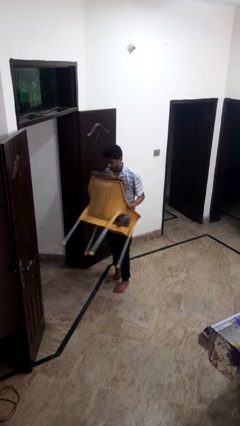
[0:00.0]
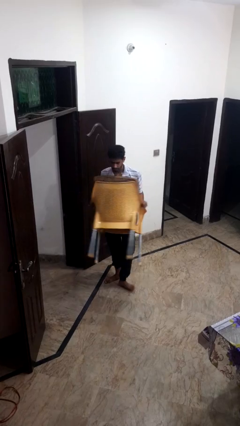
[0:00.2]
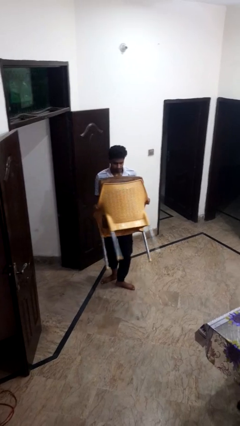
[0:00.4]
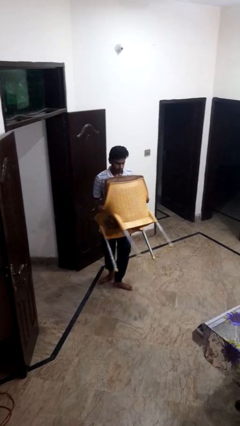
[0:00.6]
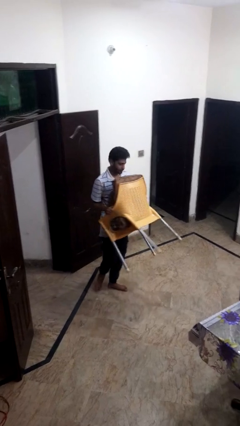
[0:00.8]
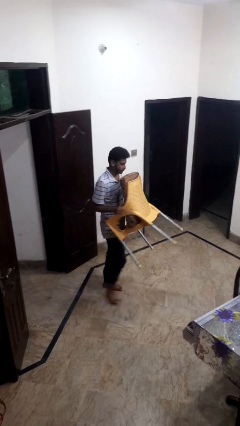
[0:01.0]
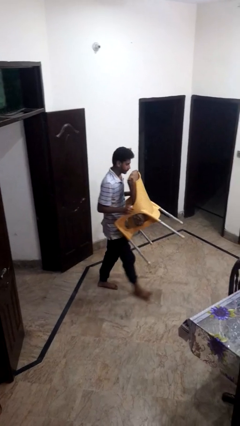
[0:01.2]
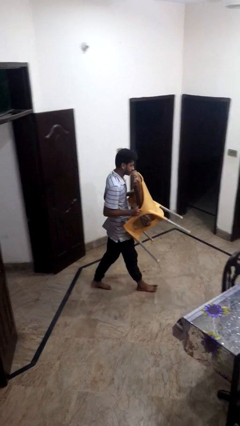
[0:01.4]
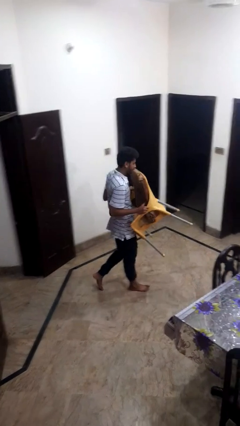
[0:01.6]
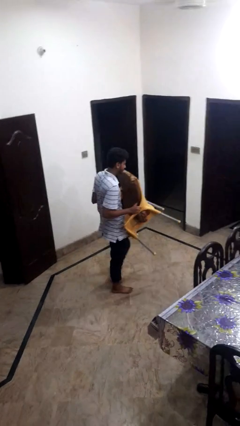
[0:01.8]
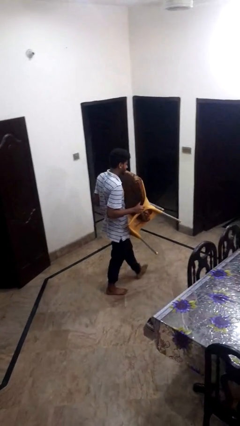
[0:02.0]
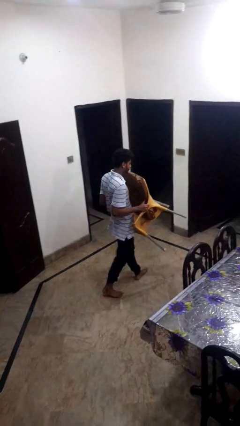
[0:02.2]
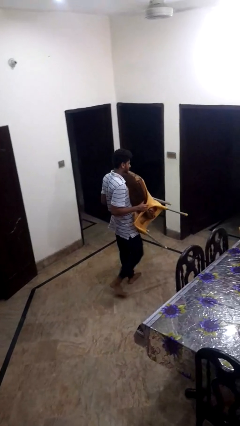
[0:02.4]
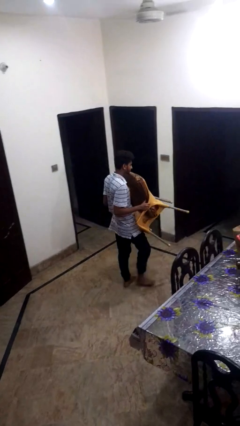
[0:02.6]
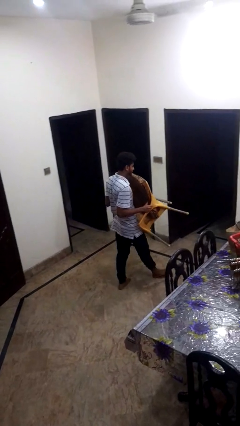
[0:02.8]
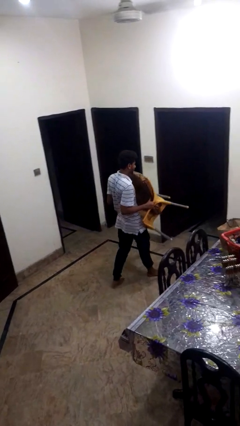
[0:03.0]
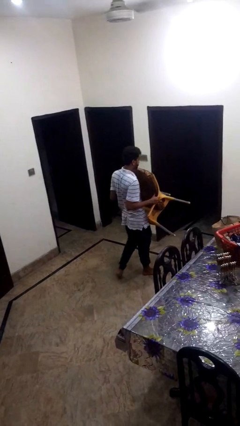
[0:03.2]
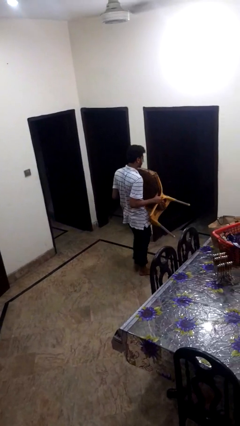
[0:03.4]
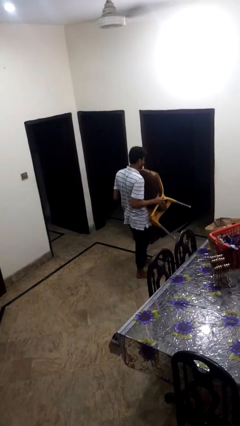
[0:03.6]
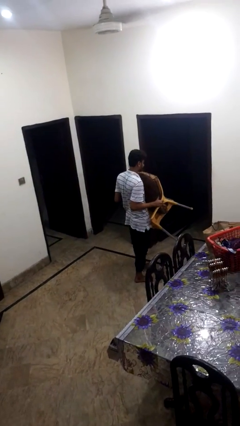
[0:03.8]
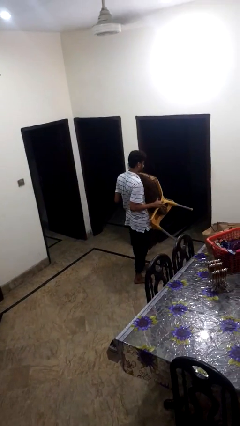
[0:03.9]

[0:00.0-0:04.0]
person carries furniture

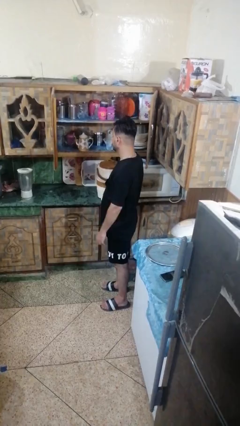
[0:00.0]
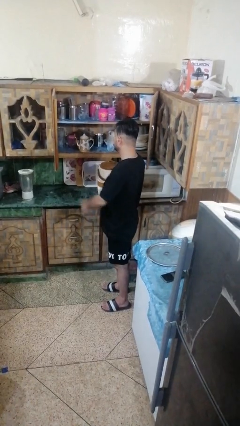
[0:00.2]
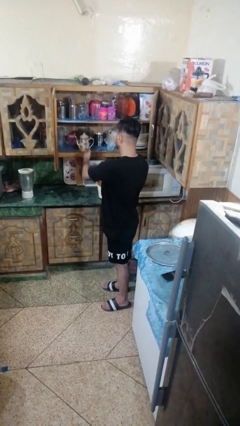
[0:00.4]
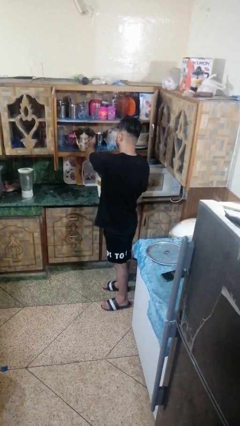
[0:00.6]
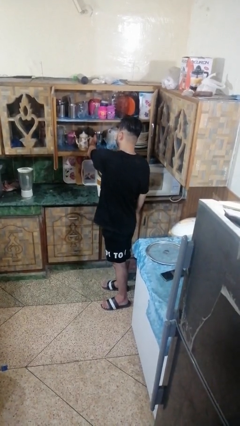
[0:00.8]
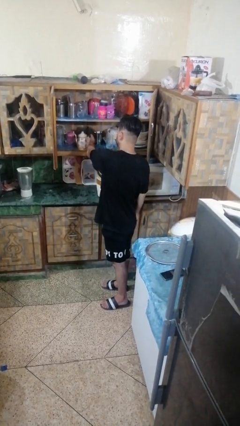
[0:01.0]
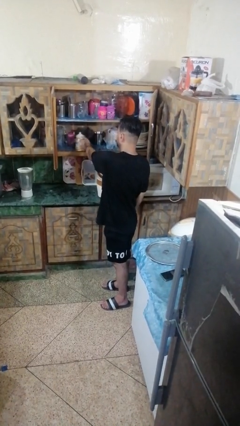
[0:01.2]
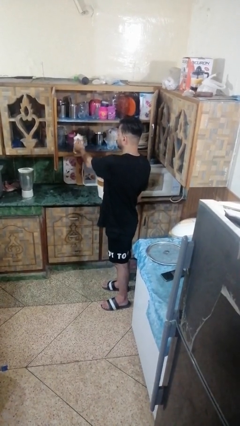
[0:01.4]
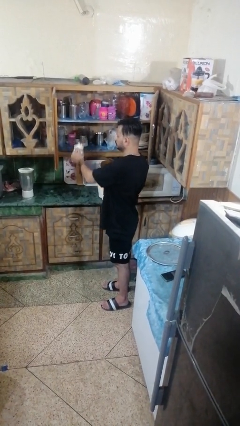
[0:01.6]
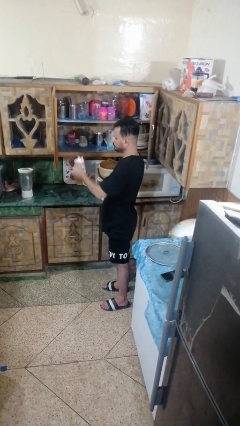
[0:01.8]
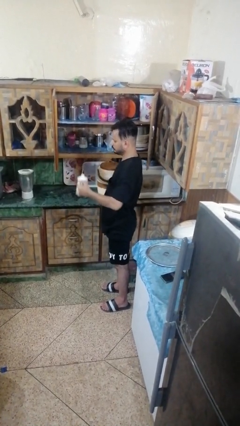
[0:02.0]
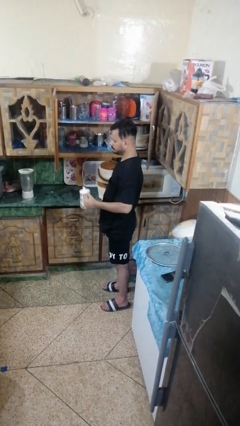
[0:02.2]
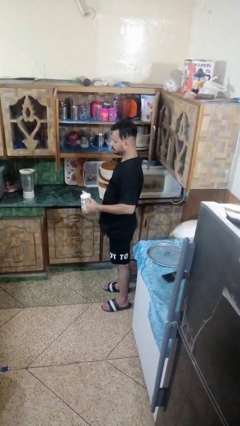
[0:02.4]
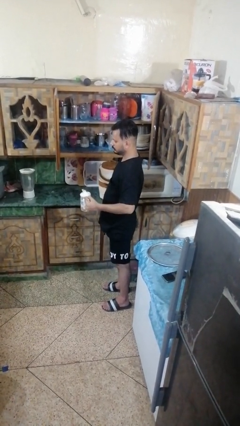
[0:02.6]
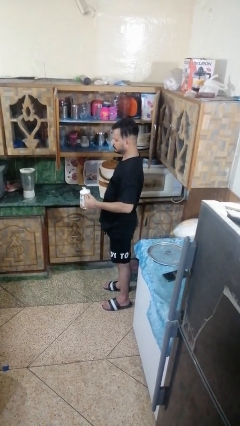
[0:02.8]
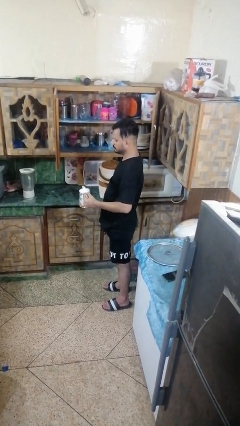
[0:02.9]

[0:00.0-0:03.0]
person picks up object from cabinet

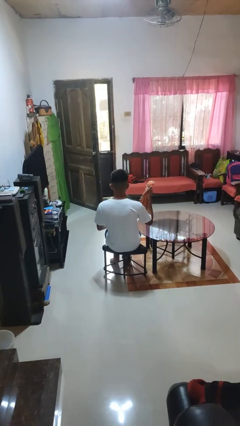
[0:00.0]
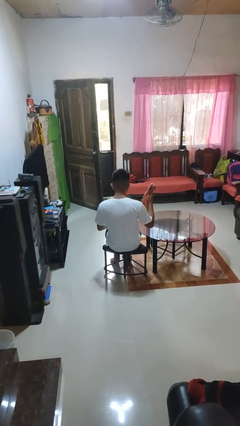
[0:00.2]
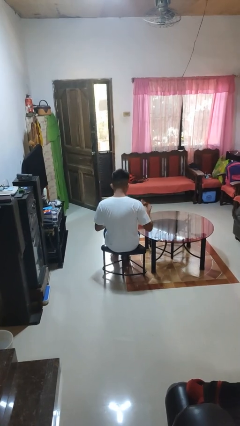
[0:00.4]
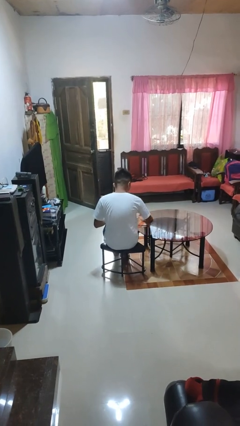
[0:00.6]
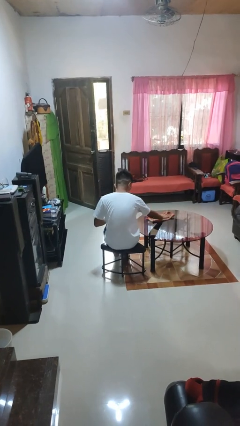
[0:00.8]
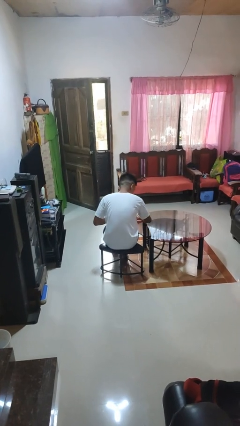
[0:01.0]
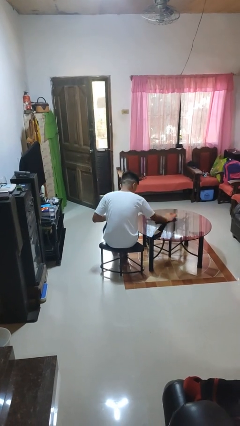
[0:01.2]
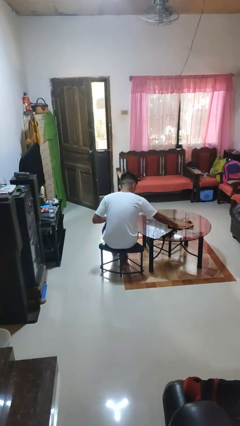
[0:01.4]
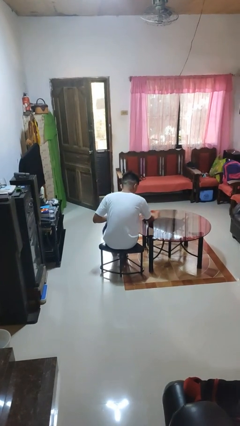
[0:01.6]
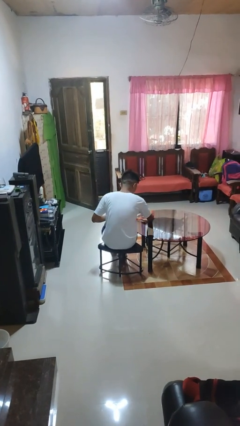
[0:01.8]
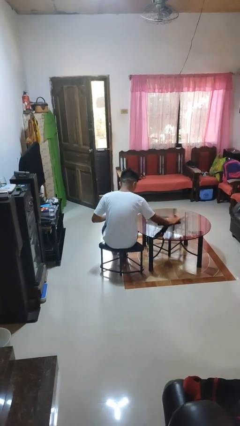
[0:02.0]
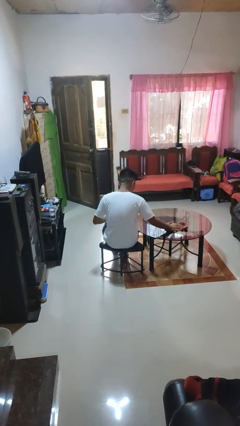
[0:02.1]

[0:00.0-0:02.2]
person cleans table with rag

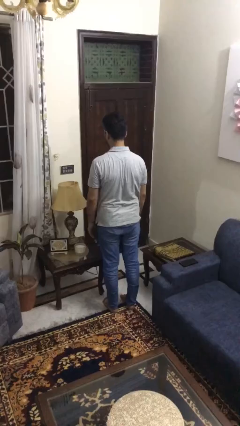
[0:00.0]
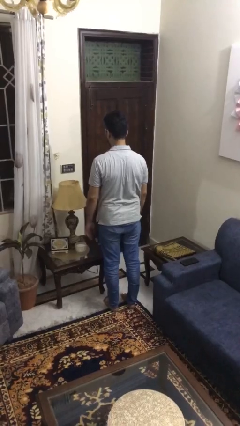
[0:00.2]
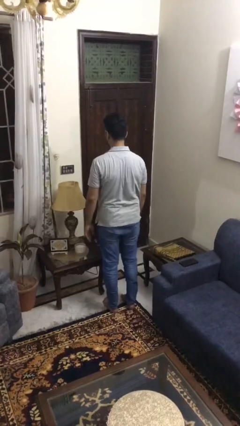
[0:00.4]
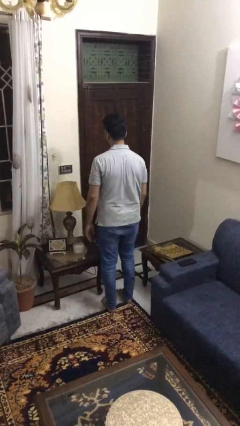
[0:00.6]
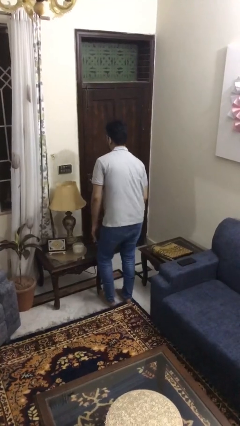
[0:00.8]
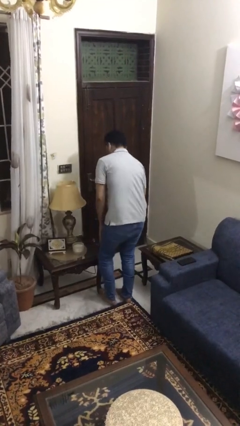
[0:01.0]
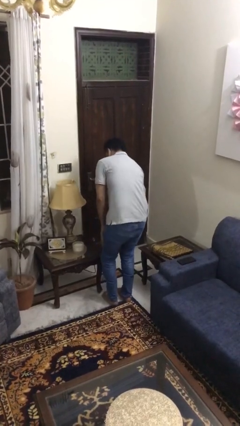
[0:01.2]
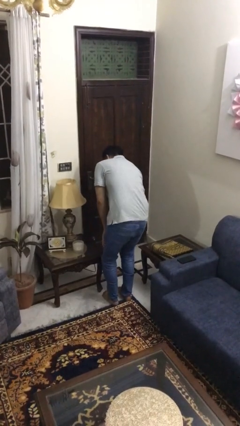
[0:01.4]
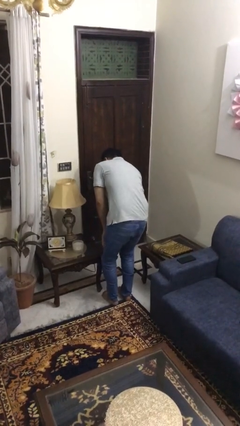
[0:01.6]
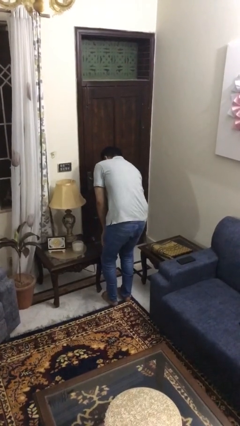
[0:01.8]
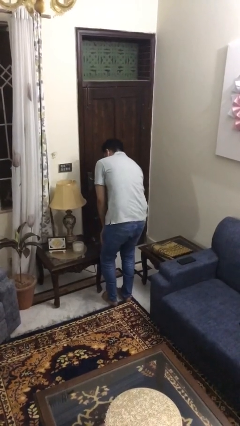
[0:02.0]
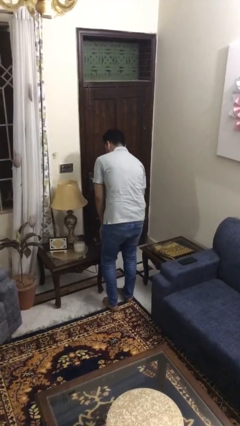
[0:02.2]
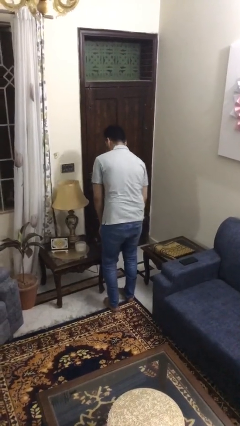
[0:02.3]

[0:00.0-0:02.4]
person stubs toe

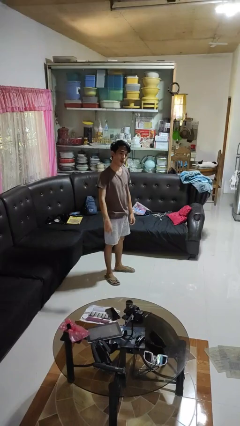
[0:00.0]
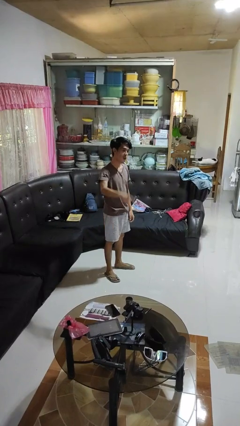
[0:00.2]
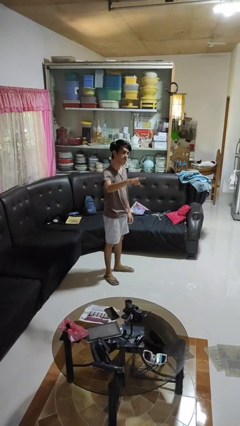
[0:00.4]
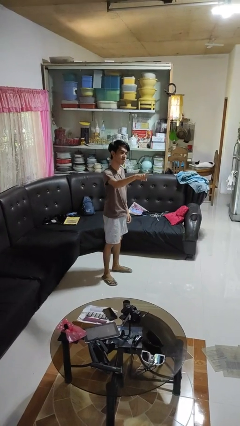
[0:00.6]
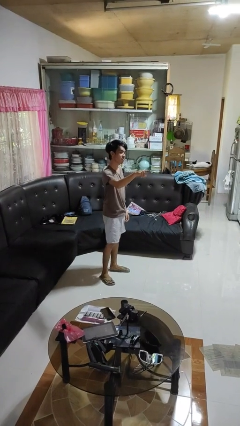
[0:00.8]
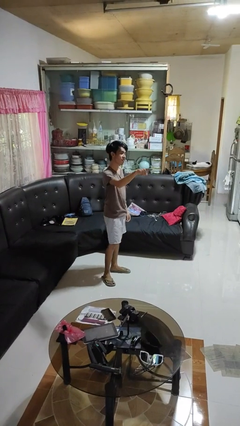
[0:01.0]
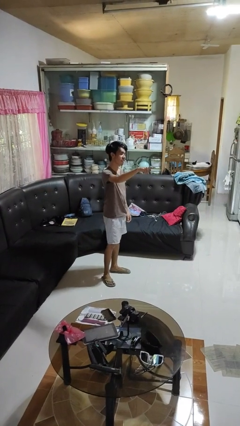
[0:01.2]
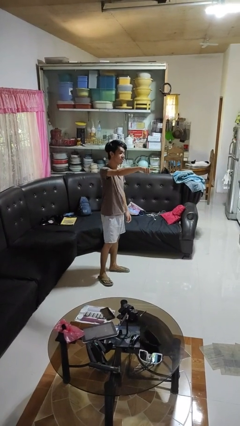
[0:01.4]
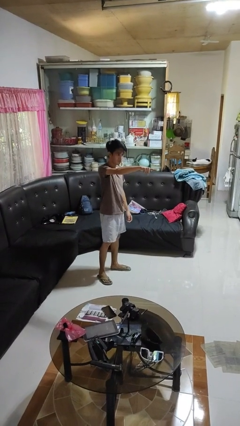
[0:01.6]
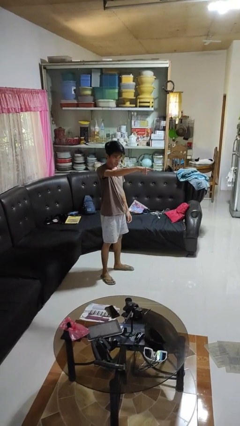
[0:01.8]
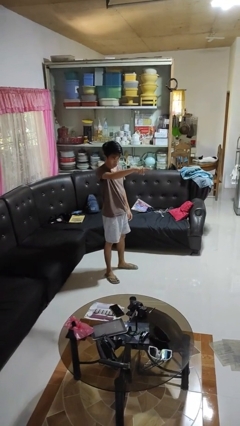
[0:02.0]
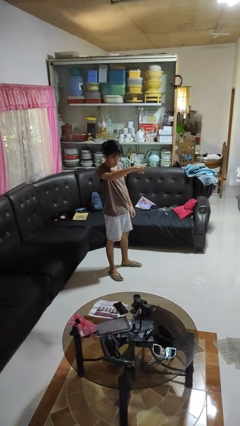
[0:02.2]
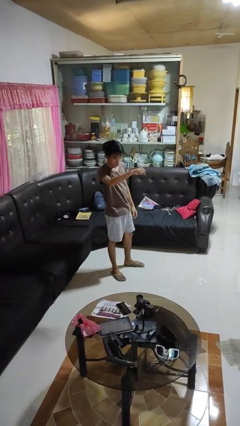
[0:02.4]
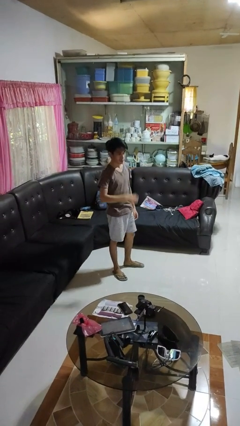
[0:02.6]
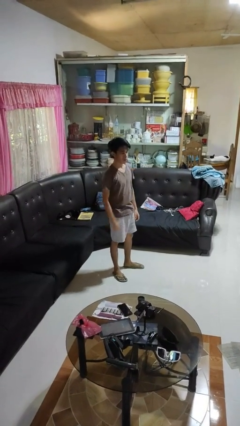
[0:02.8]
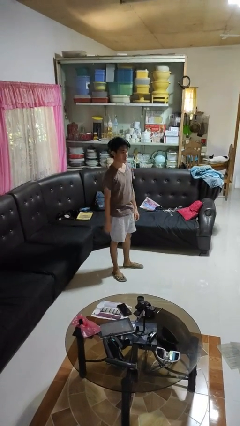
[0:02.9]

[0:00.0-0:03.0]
person points at person

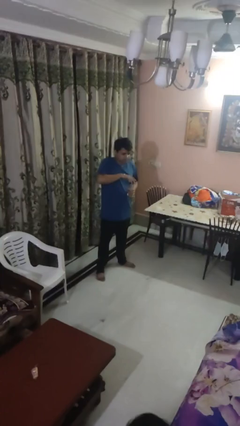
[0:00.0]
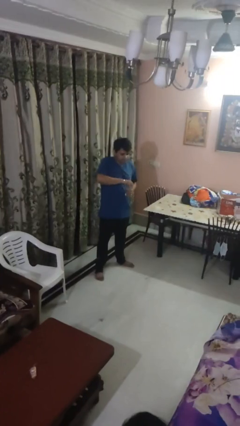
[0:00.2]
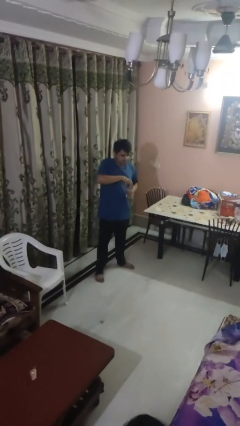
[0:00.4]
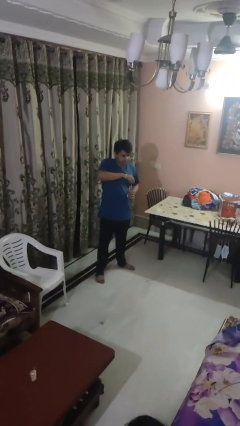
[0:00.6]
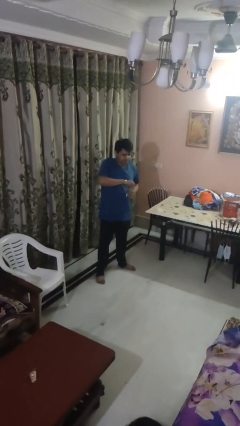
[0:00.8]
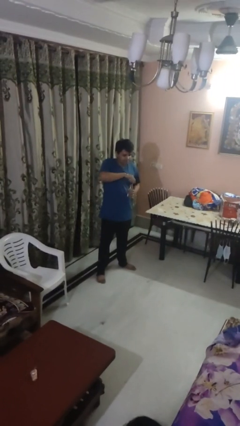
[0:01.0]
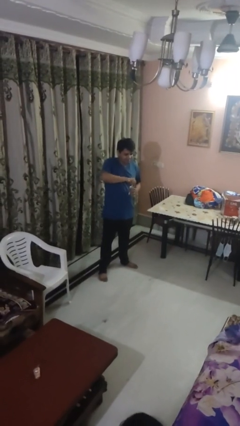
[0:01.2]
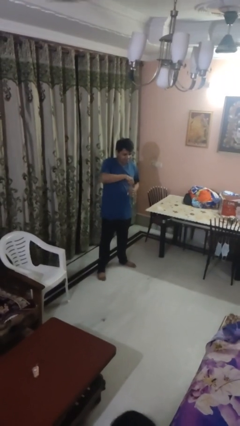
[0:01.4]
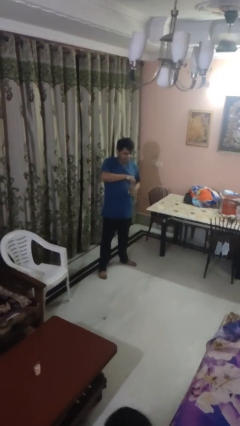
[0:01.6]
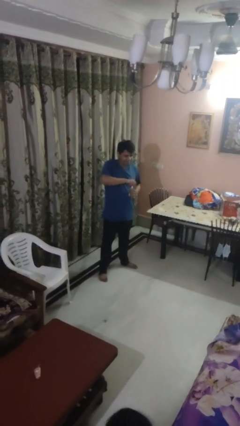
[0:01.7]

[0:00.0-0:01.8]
person screws lid to bottle

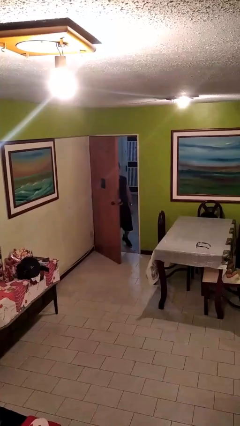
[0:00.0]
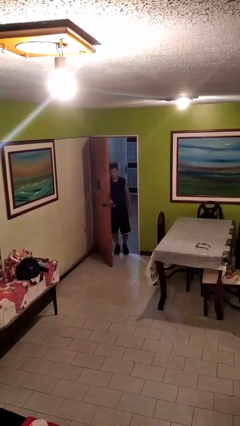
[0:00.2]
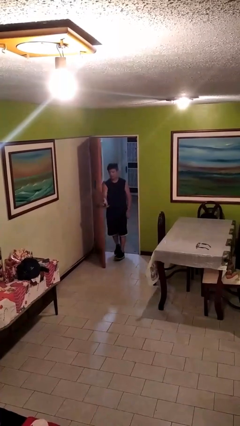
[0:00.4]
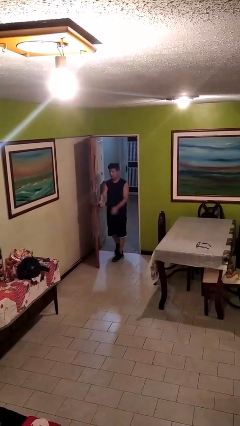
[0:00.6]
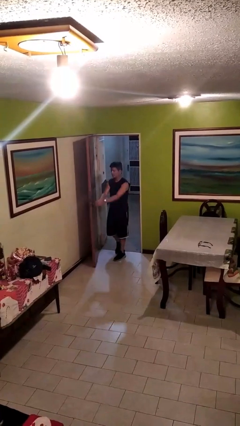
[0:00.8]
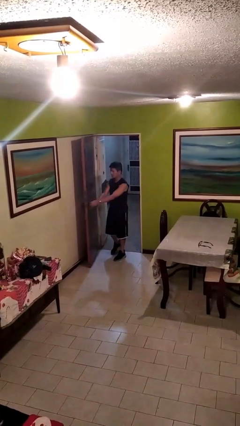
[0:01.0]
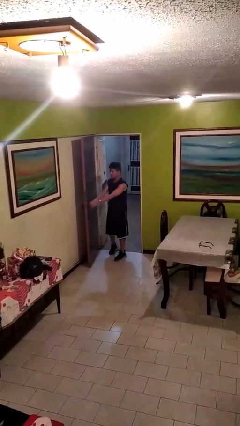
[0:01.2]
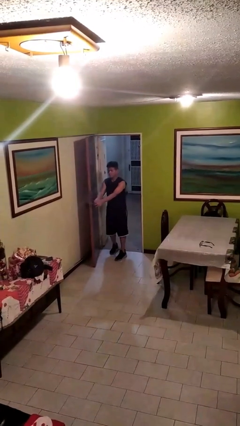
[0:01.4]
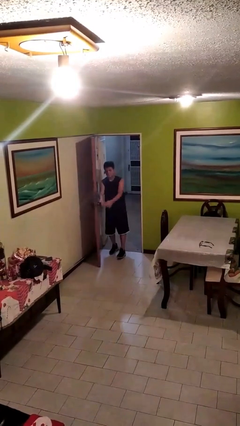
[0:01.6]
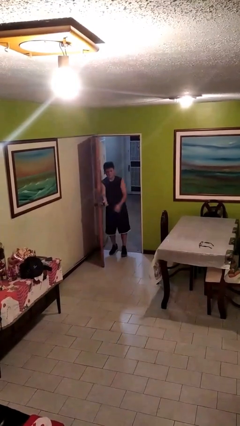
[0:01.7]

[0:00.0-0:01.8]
person opens facility door
